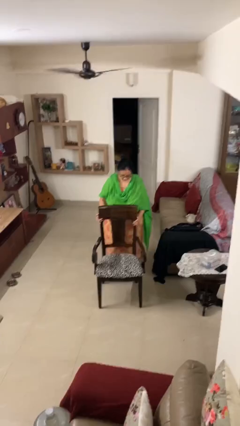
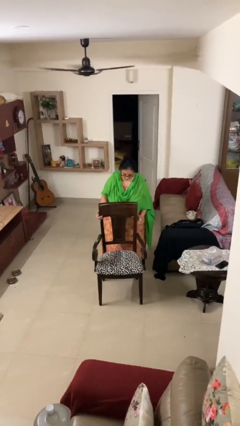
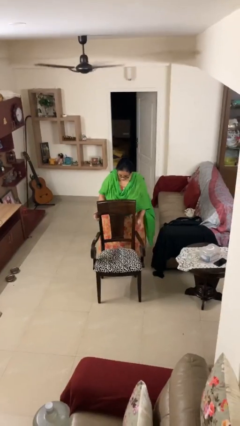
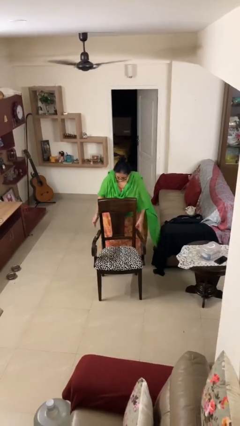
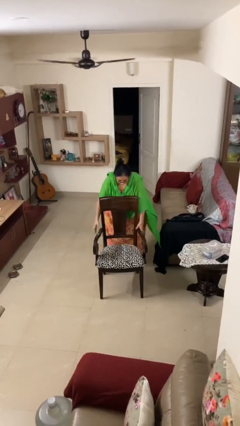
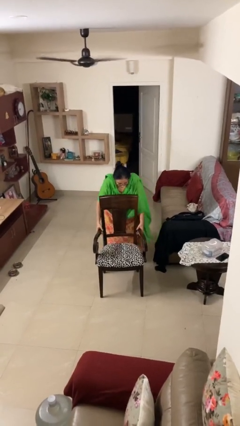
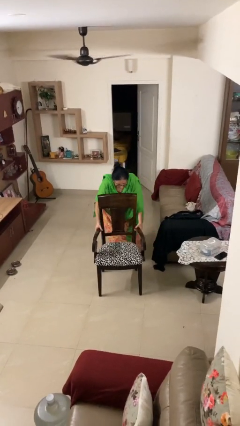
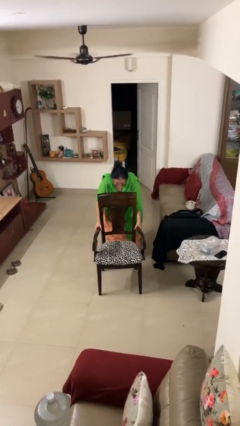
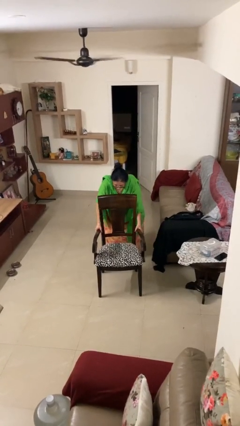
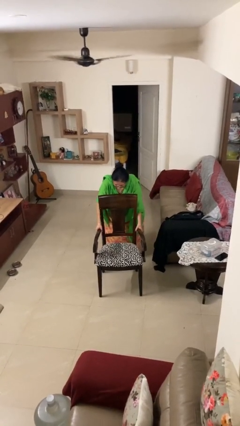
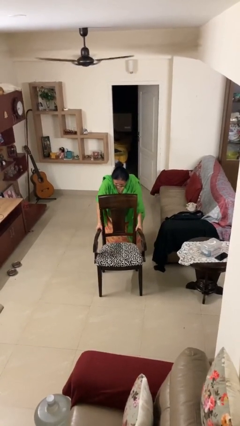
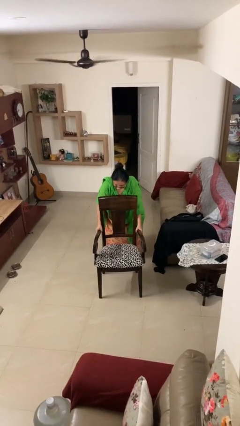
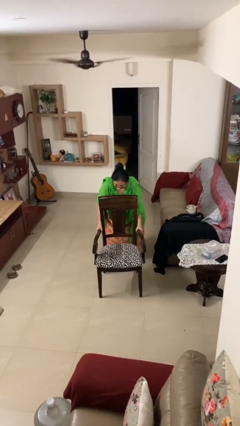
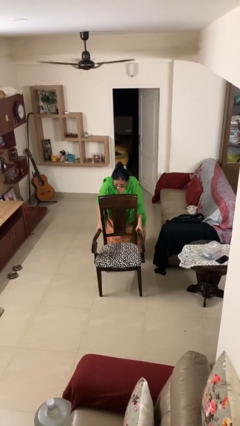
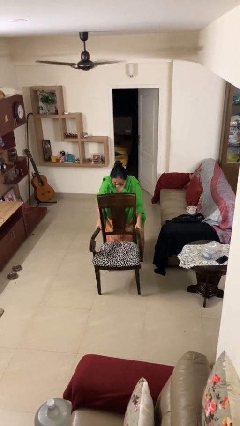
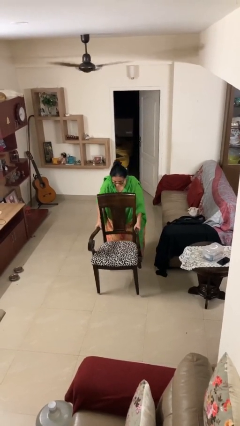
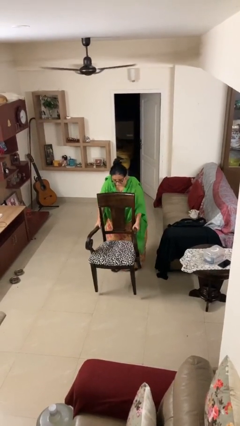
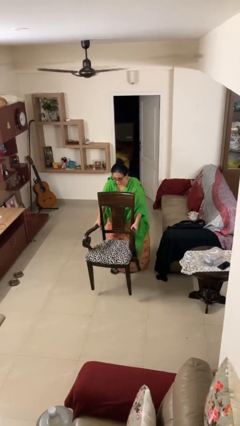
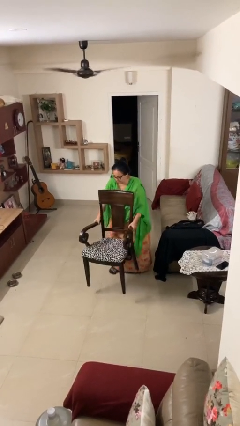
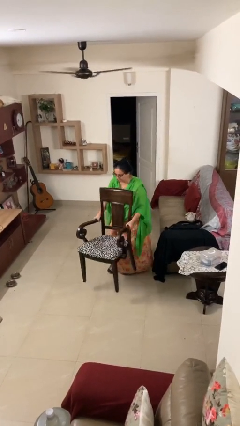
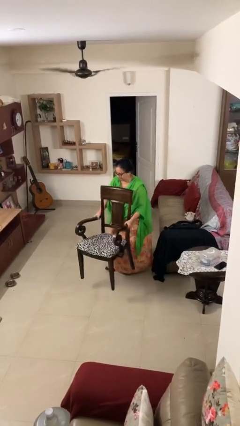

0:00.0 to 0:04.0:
person picks up object from floor

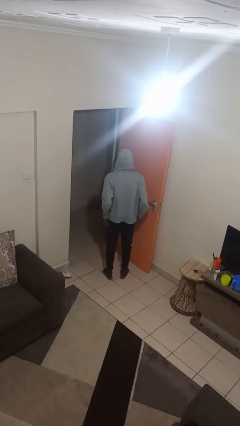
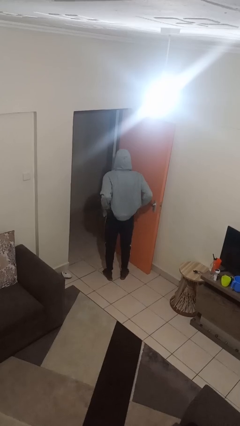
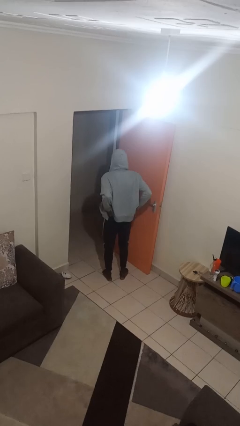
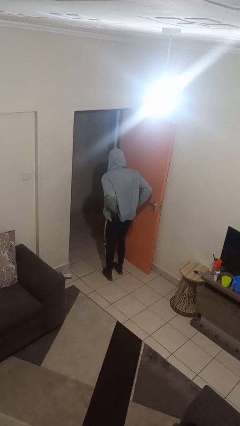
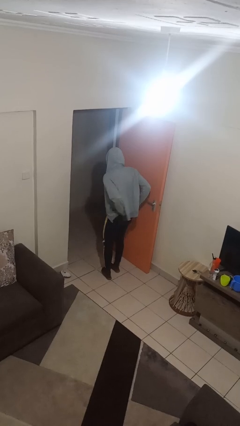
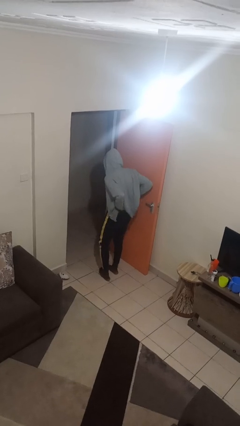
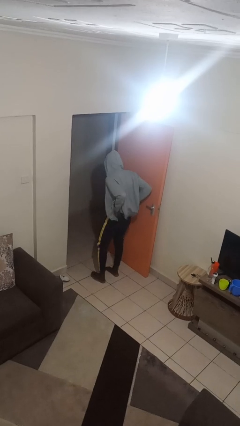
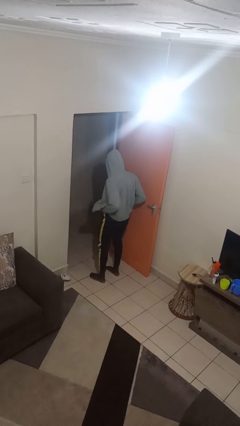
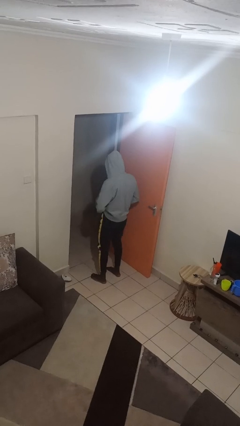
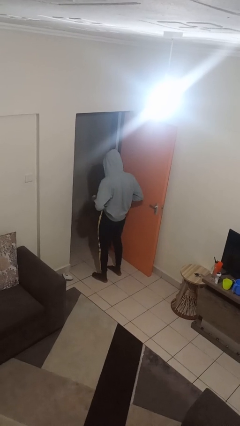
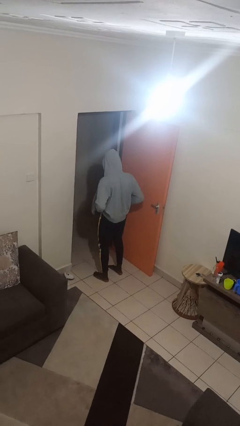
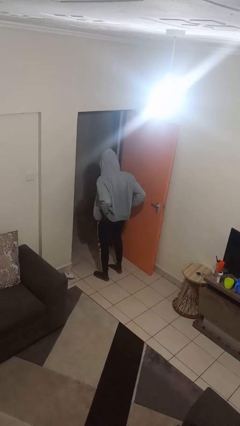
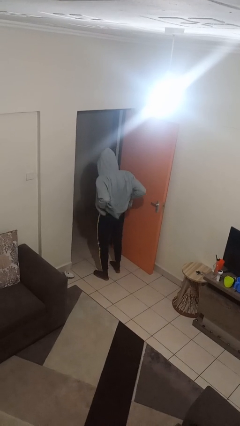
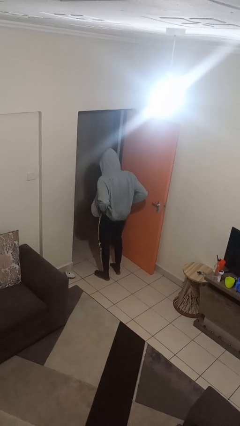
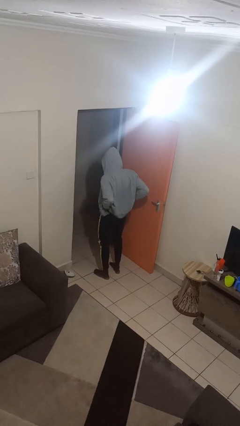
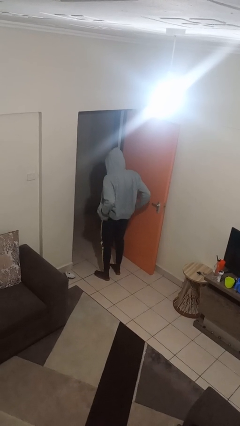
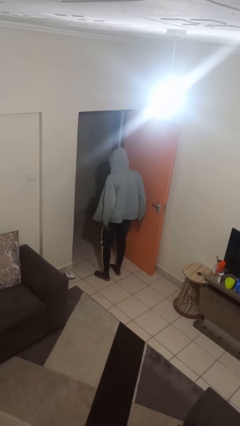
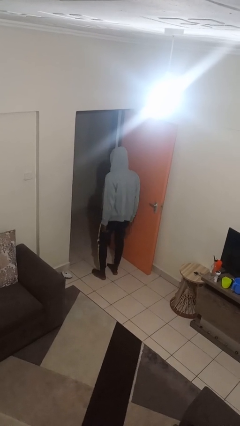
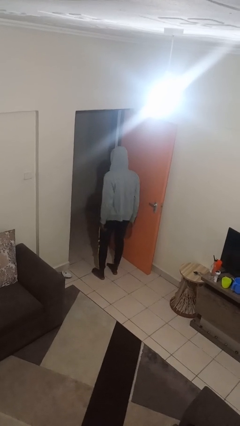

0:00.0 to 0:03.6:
person hikes up pants

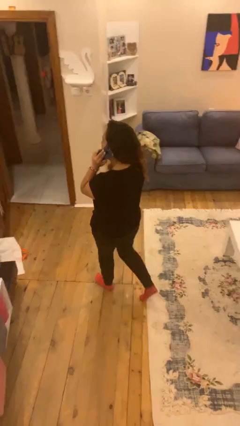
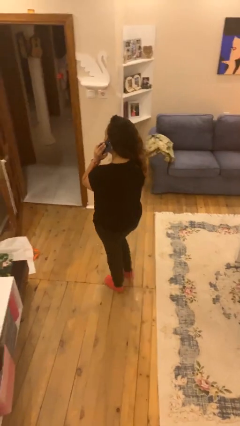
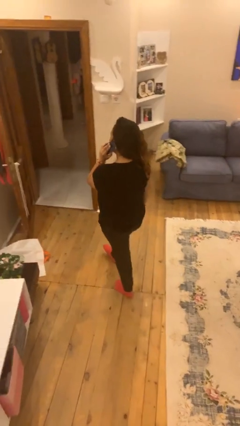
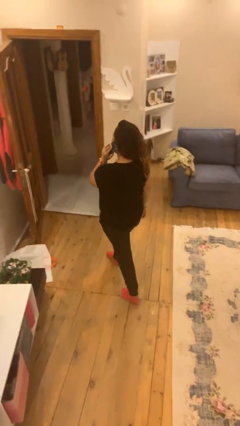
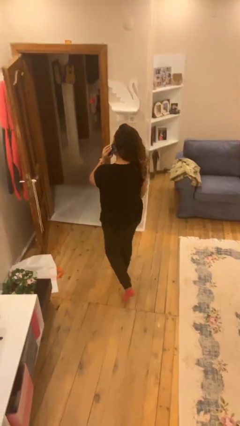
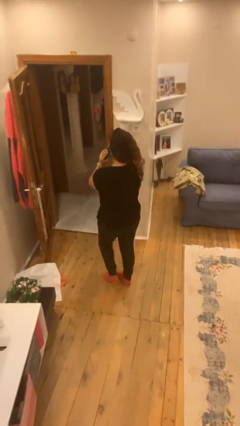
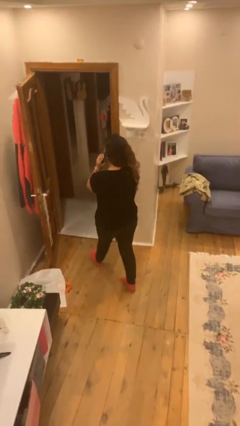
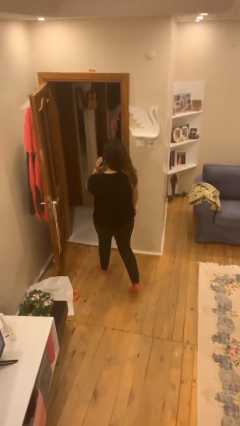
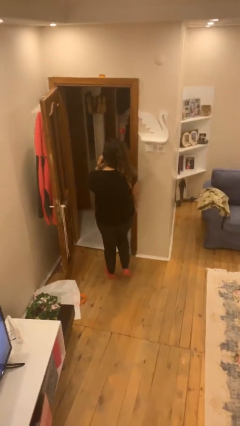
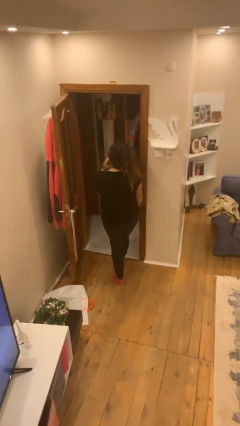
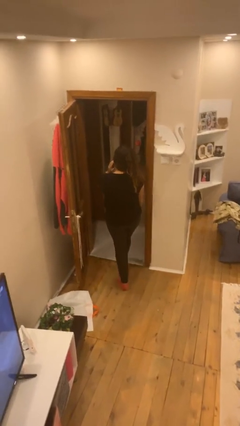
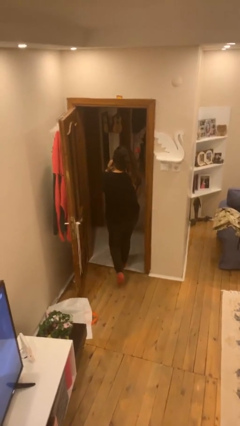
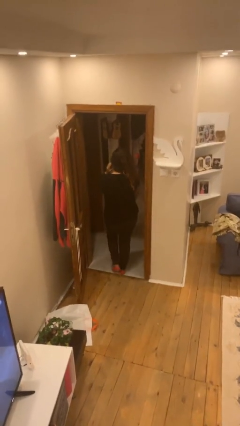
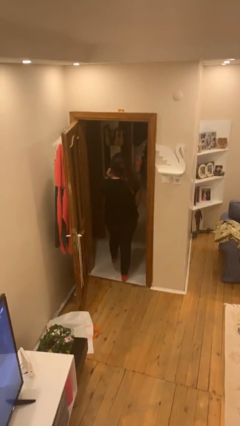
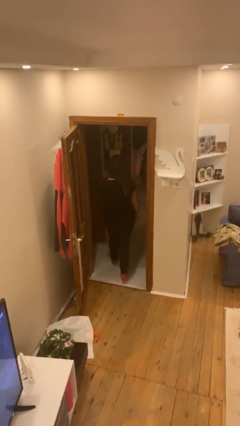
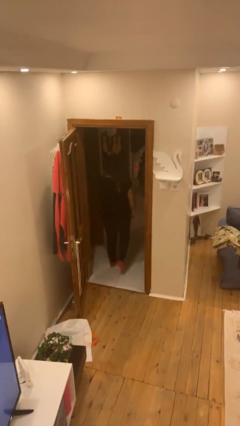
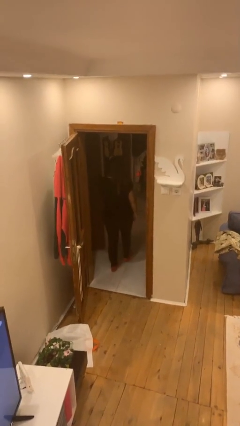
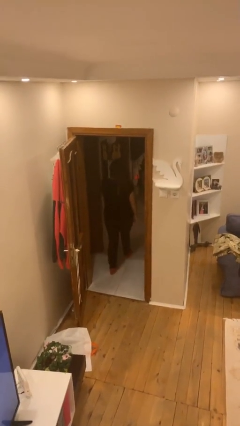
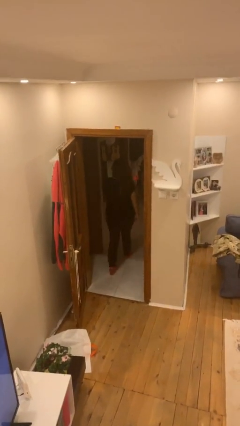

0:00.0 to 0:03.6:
person exits scene through structure

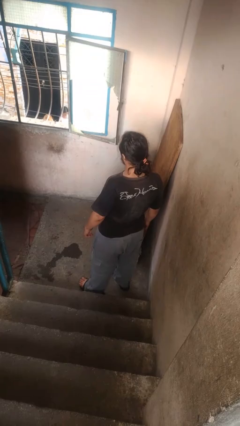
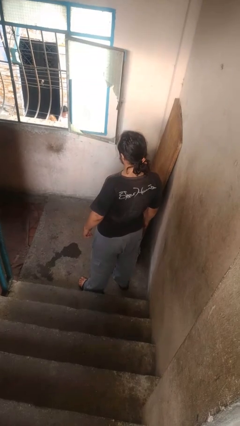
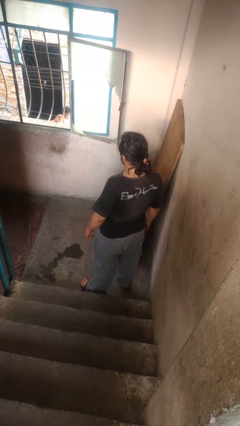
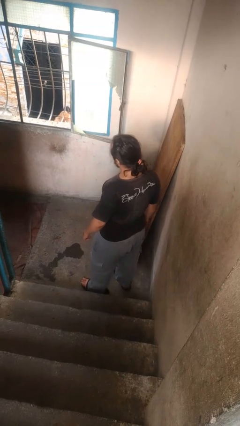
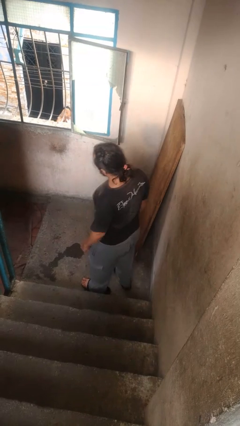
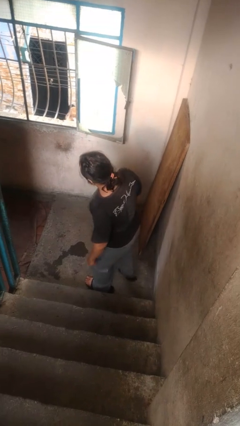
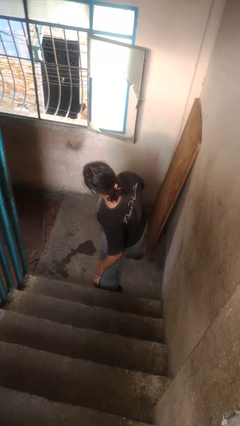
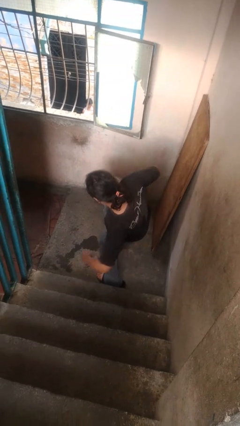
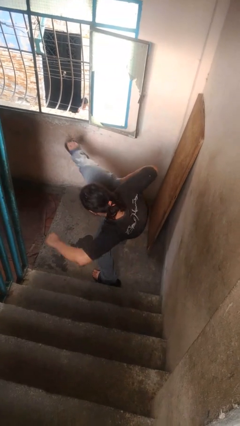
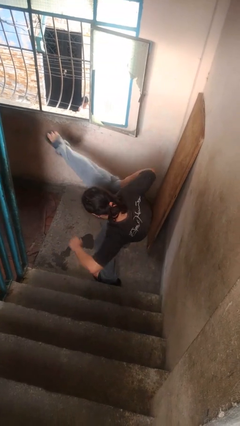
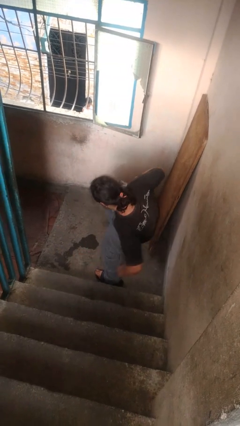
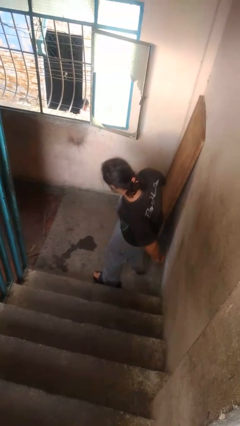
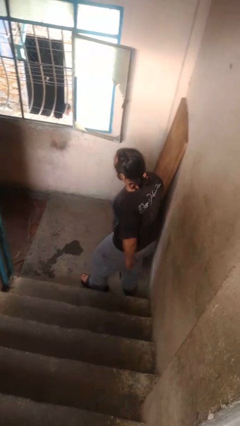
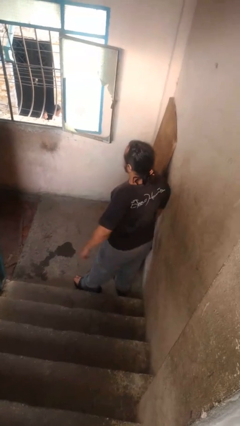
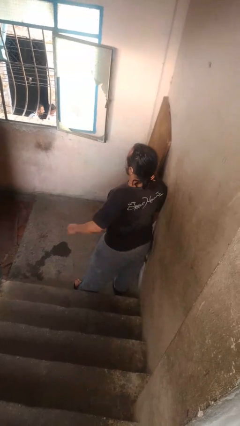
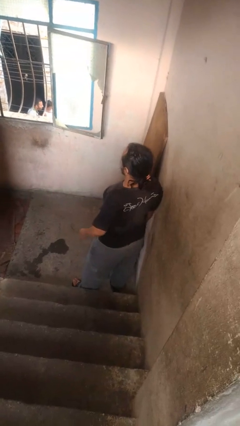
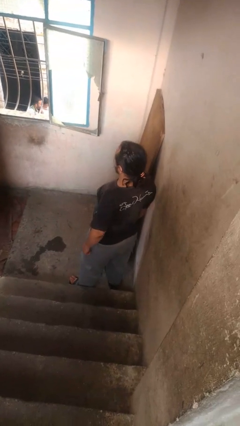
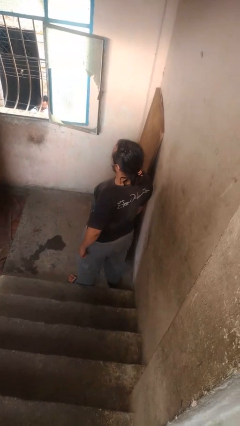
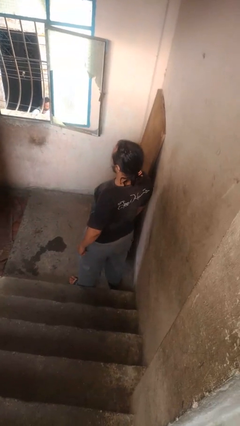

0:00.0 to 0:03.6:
person karate kicks

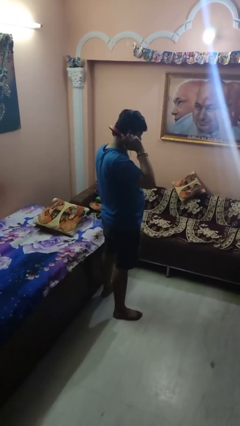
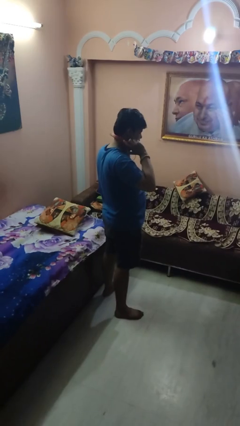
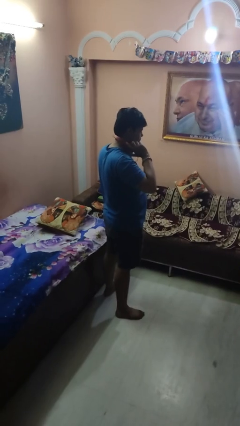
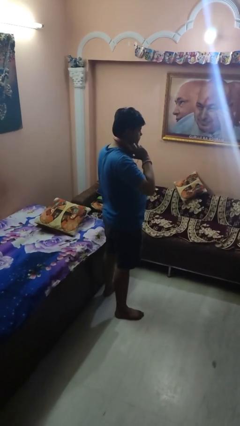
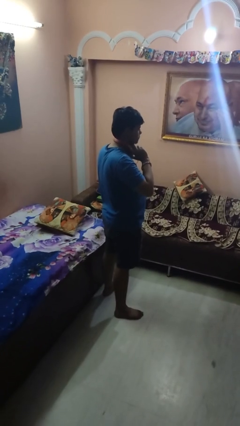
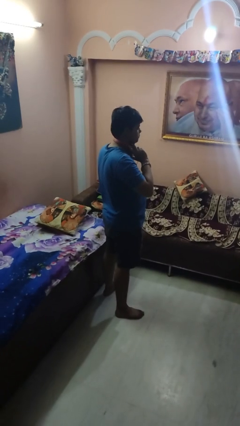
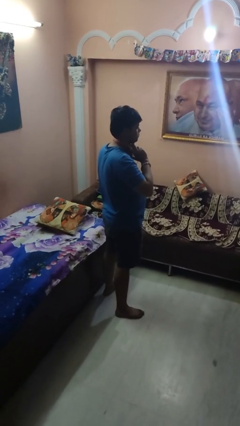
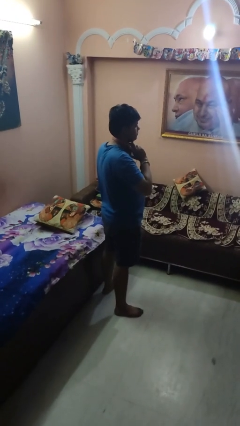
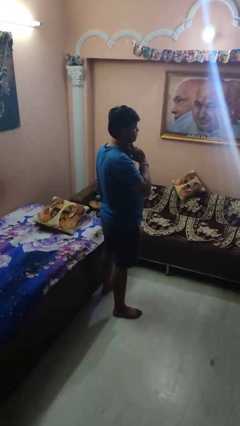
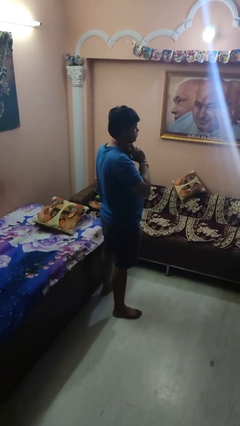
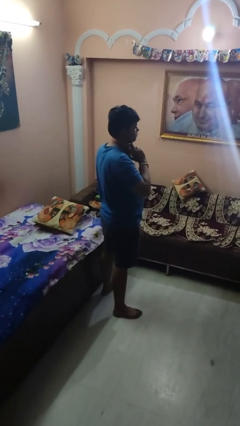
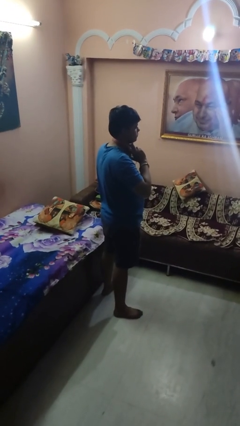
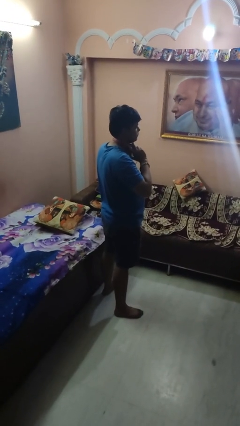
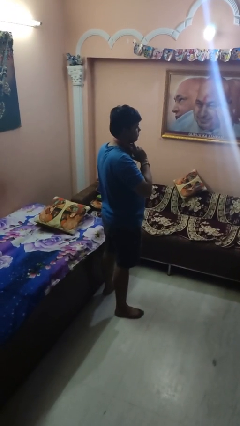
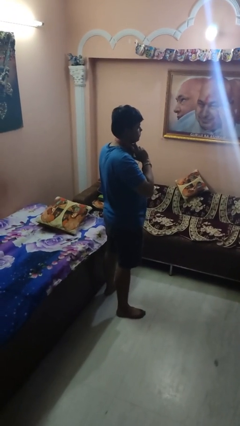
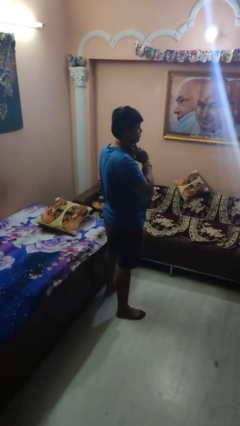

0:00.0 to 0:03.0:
person takes off headphones
